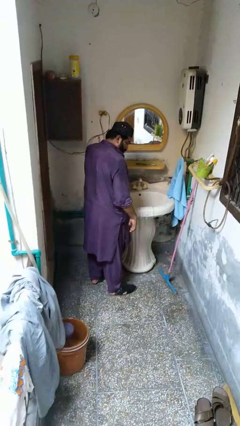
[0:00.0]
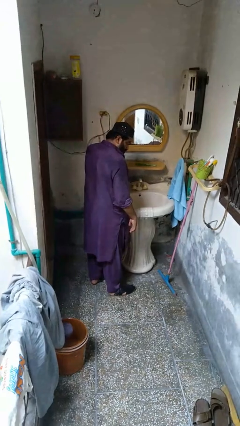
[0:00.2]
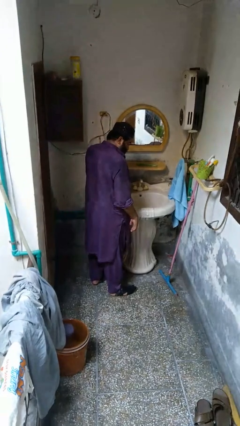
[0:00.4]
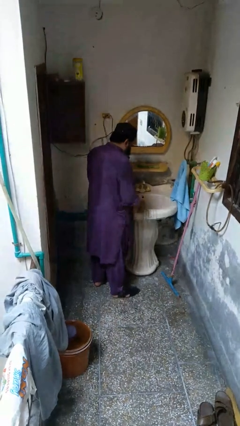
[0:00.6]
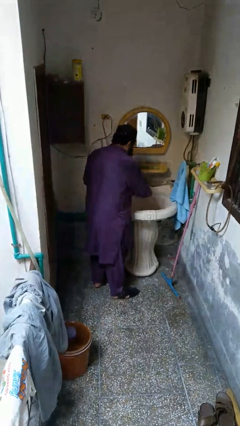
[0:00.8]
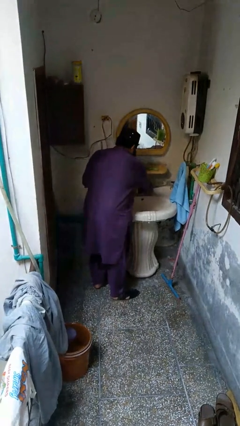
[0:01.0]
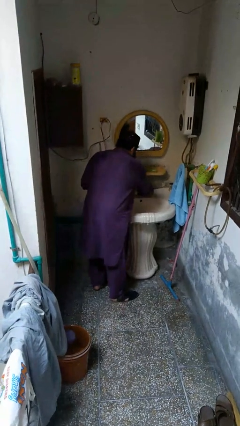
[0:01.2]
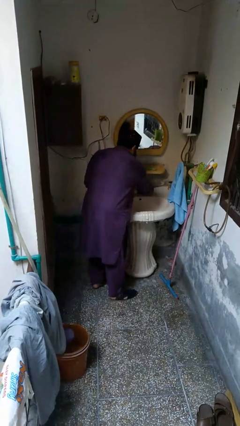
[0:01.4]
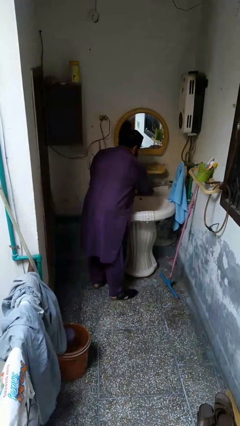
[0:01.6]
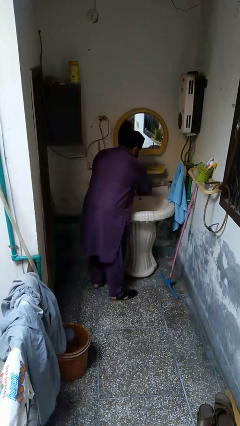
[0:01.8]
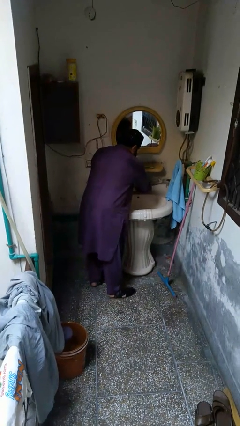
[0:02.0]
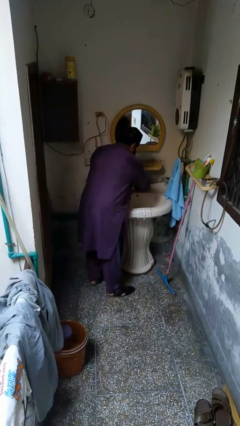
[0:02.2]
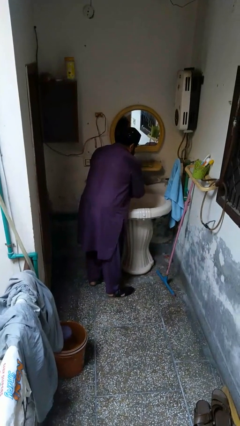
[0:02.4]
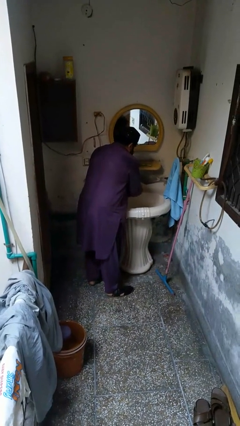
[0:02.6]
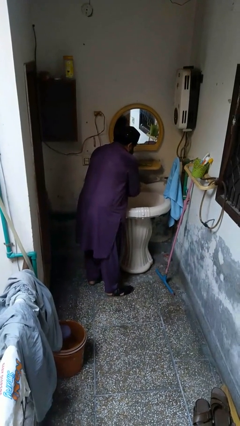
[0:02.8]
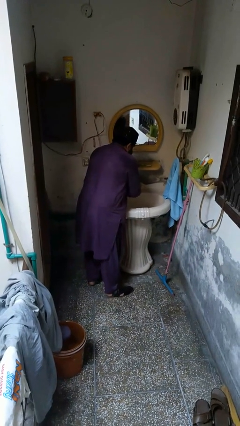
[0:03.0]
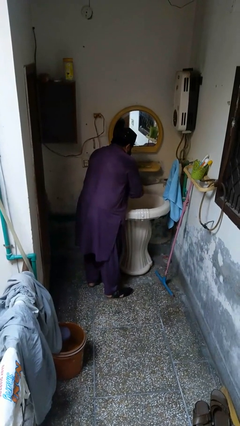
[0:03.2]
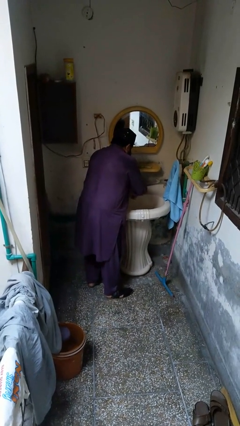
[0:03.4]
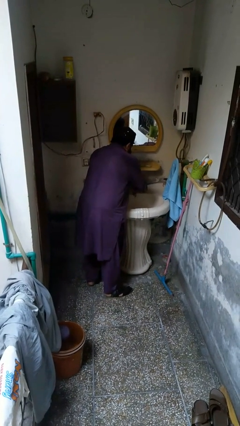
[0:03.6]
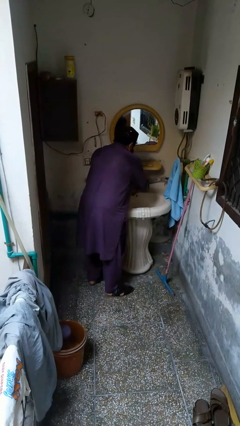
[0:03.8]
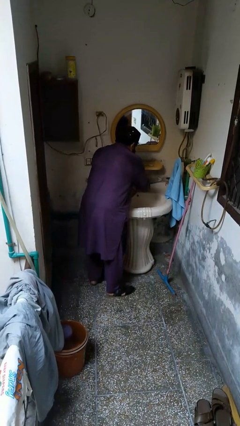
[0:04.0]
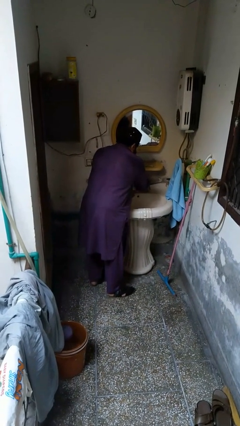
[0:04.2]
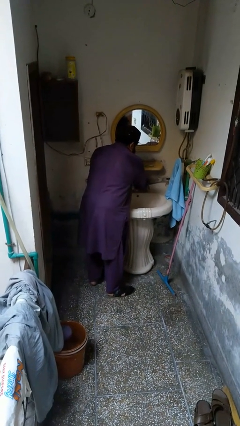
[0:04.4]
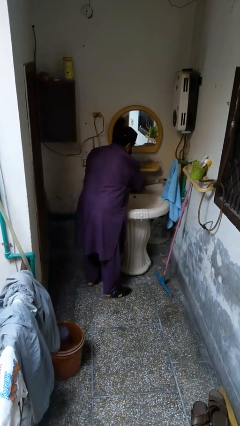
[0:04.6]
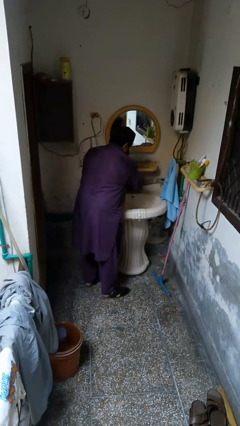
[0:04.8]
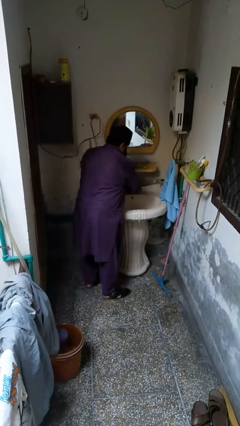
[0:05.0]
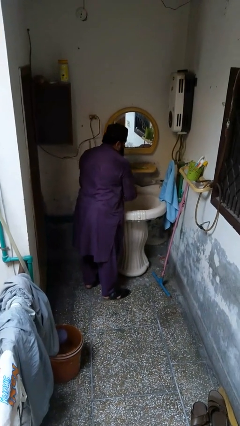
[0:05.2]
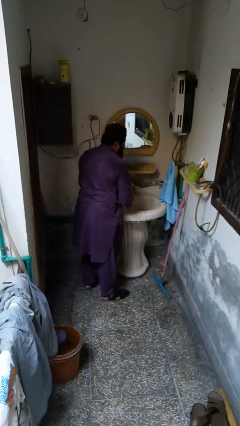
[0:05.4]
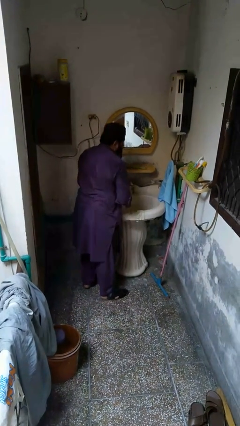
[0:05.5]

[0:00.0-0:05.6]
person washes hands

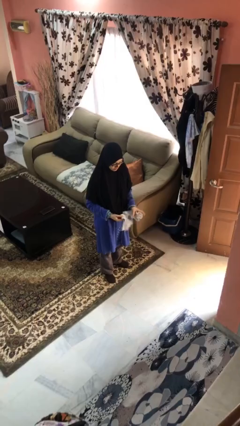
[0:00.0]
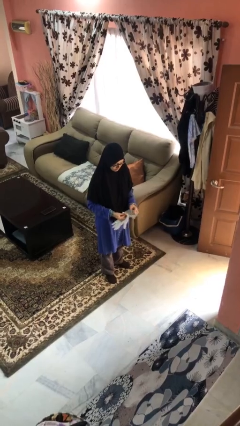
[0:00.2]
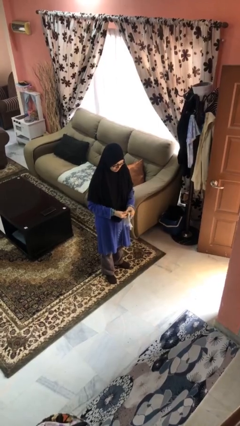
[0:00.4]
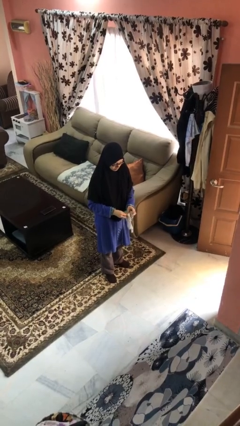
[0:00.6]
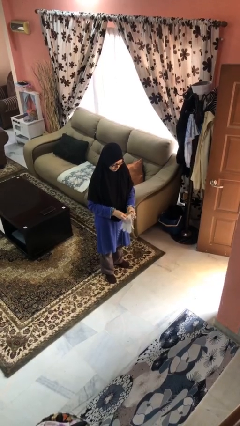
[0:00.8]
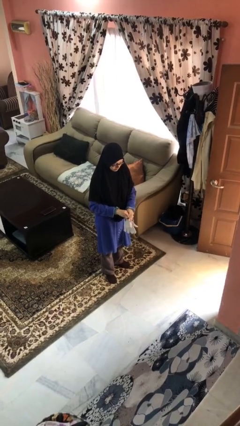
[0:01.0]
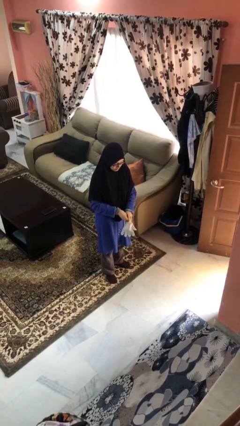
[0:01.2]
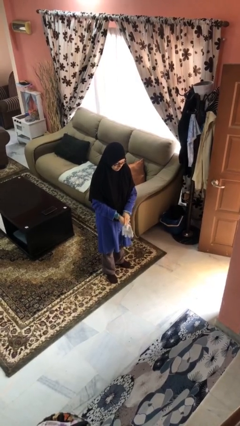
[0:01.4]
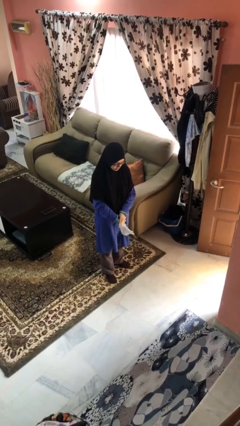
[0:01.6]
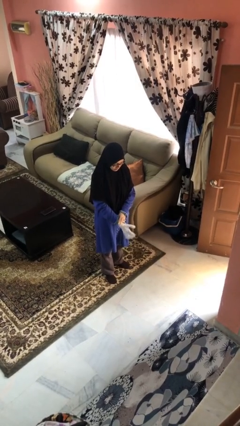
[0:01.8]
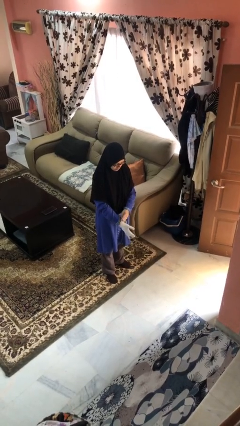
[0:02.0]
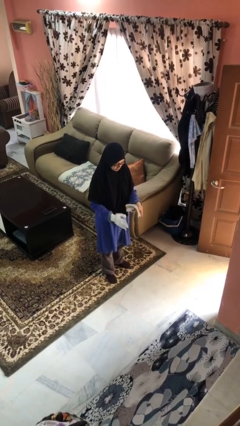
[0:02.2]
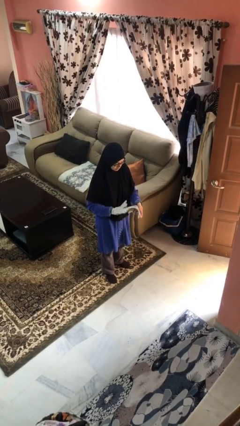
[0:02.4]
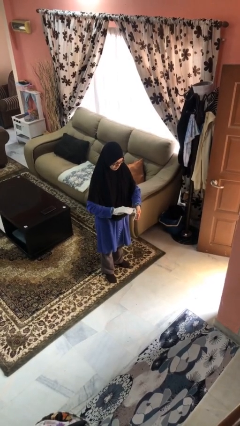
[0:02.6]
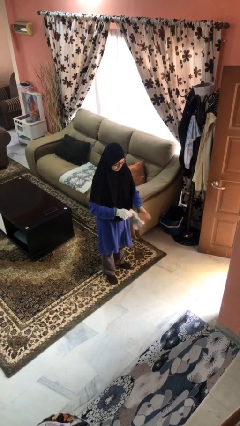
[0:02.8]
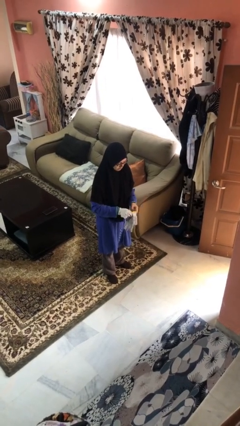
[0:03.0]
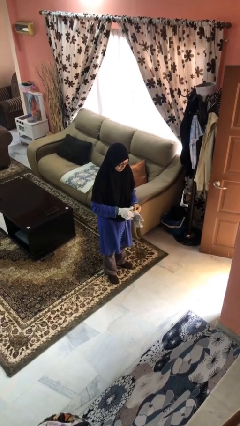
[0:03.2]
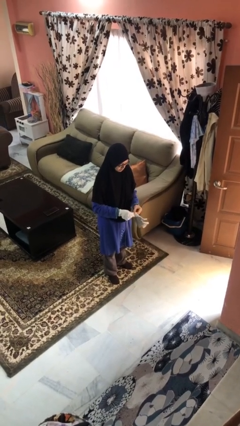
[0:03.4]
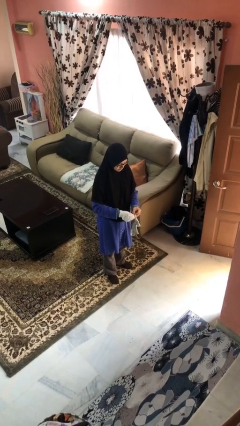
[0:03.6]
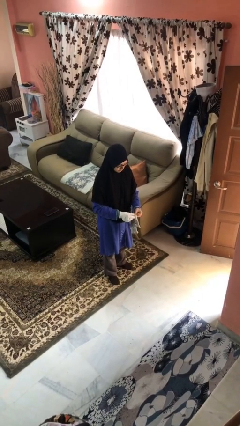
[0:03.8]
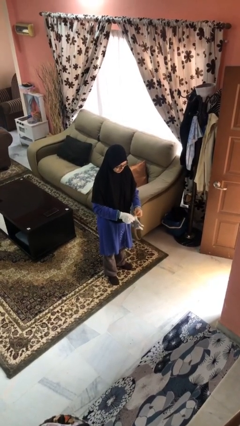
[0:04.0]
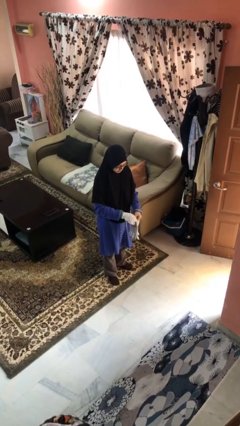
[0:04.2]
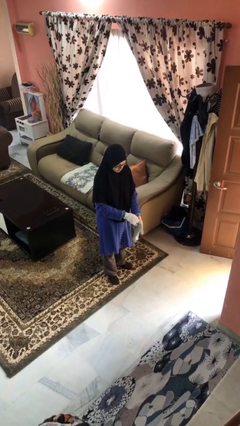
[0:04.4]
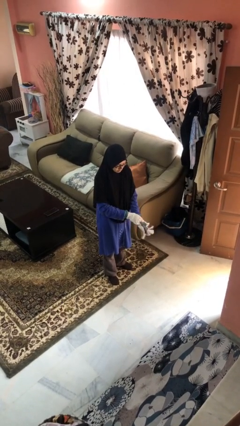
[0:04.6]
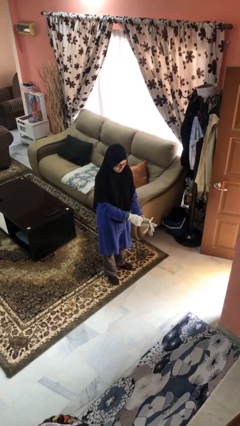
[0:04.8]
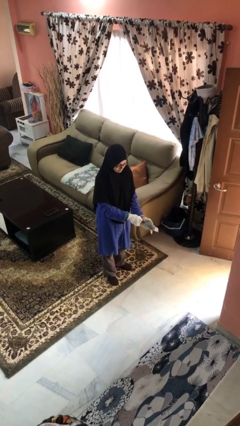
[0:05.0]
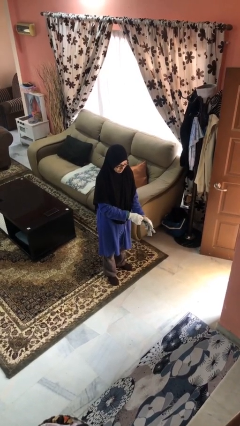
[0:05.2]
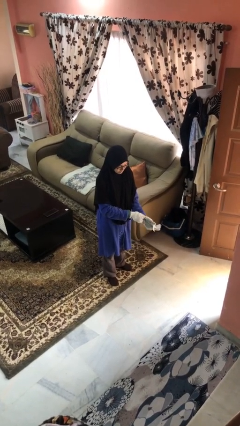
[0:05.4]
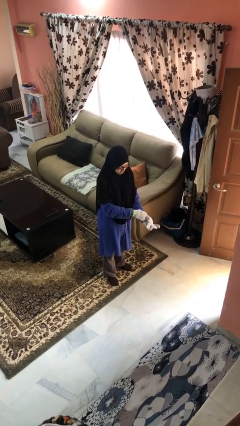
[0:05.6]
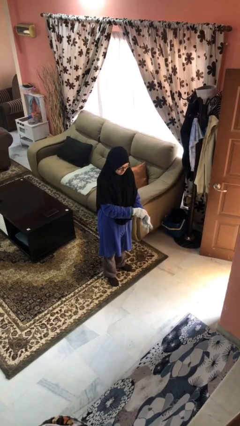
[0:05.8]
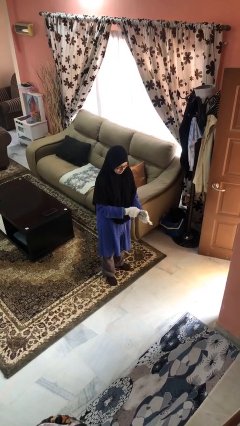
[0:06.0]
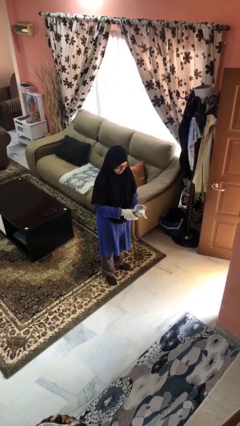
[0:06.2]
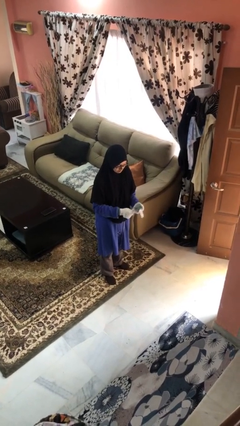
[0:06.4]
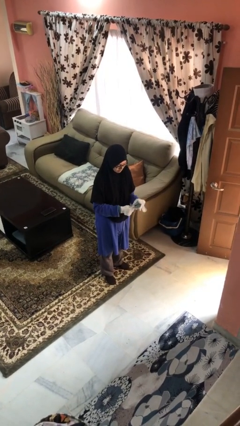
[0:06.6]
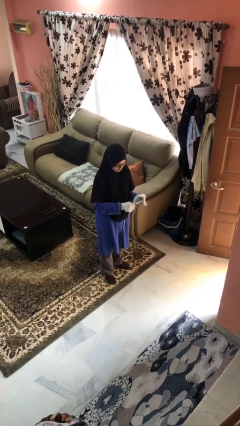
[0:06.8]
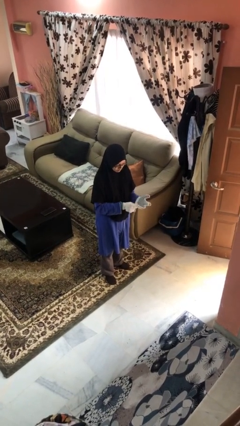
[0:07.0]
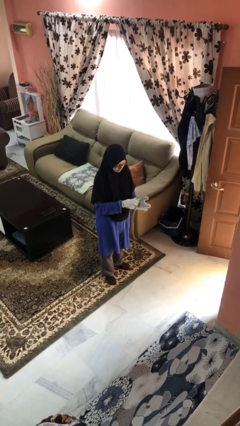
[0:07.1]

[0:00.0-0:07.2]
person puts on gloves

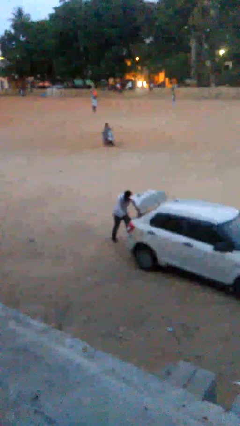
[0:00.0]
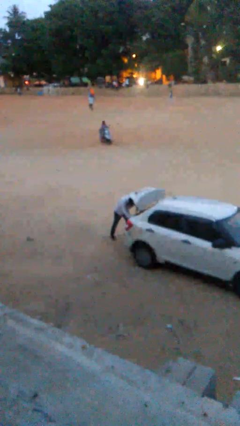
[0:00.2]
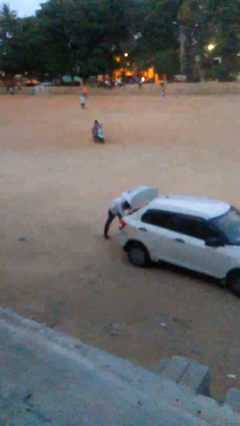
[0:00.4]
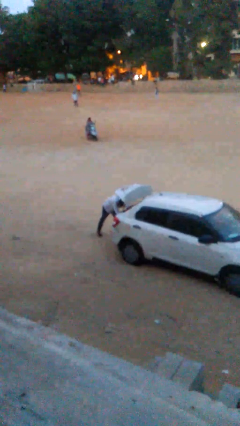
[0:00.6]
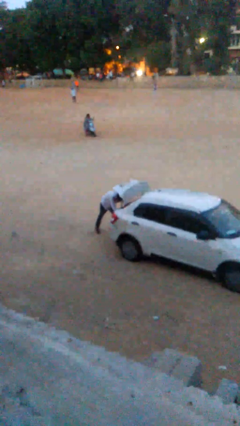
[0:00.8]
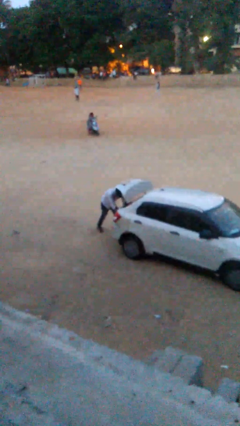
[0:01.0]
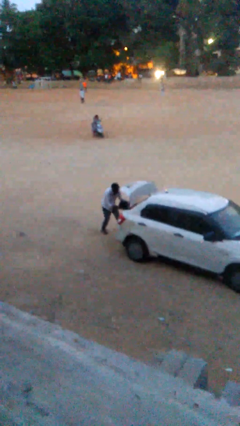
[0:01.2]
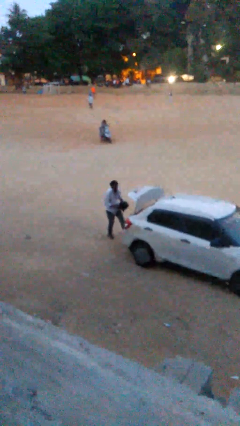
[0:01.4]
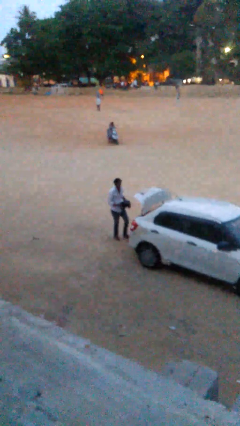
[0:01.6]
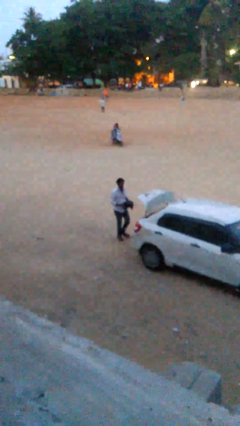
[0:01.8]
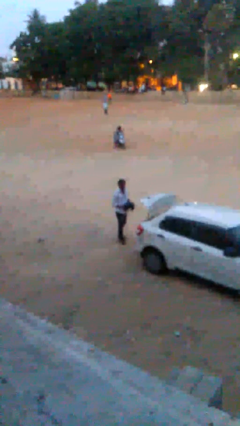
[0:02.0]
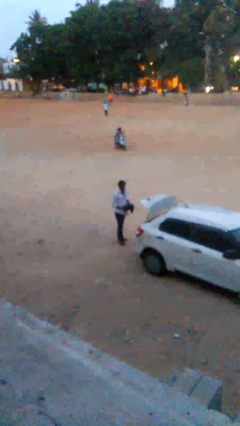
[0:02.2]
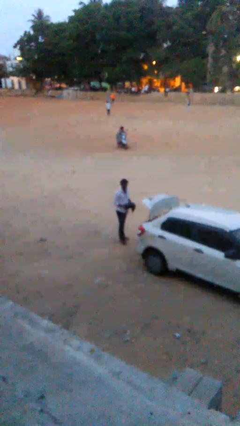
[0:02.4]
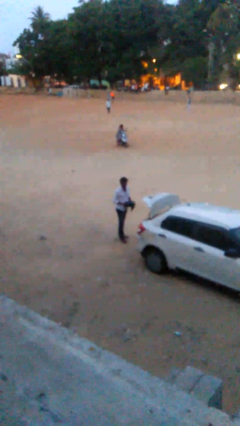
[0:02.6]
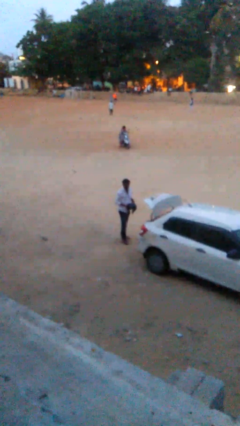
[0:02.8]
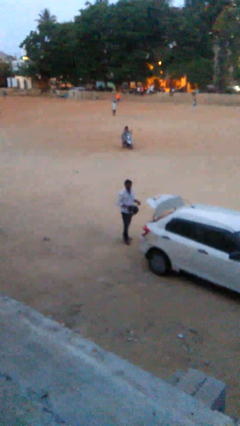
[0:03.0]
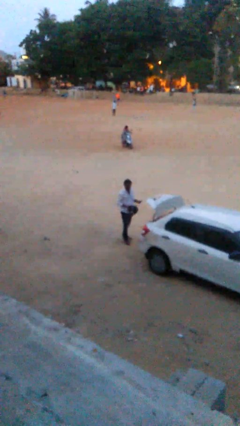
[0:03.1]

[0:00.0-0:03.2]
person unloads car

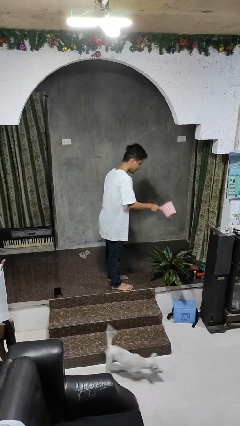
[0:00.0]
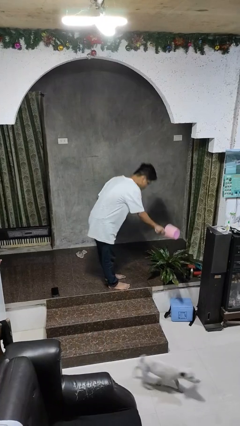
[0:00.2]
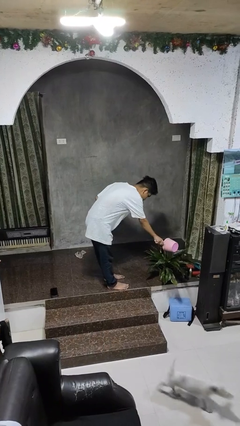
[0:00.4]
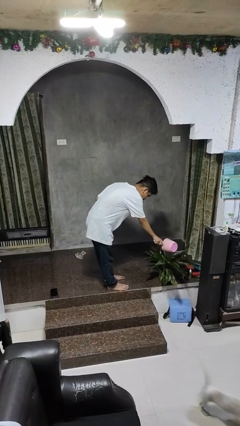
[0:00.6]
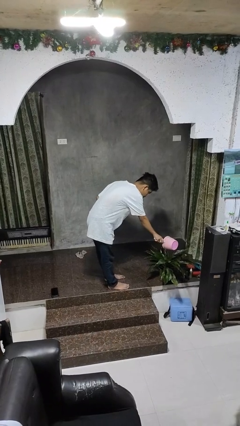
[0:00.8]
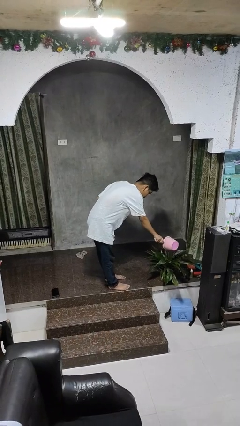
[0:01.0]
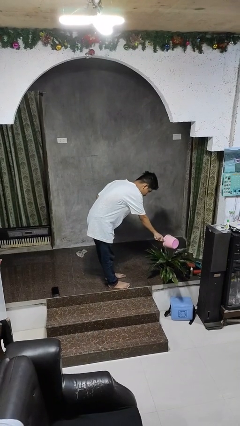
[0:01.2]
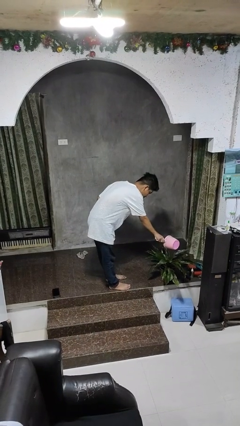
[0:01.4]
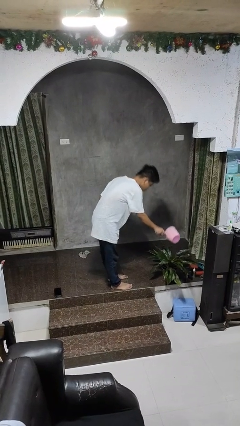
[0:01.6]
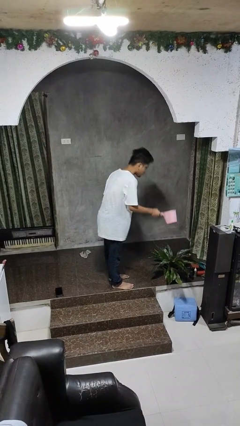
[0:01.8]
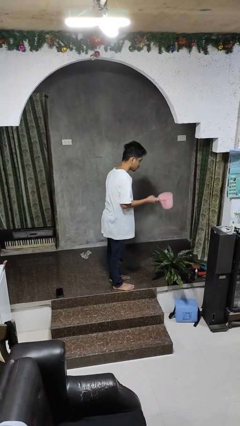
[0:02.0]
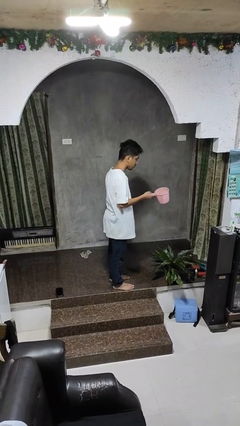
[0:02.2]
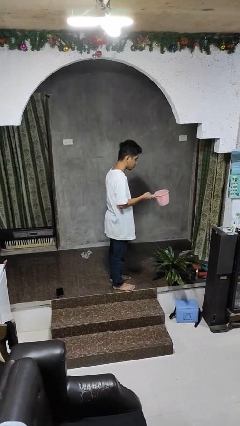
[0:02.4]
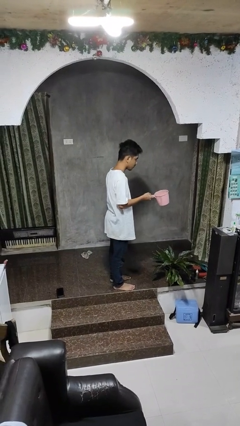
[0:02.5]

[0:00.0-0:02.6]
person waters houseplant
